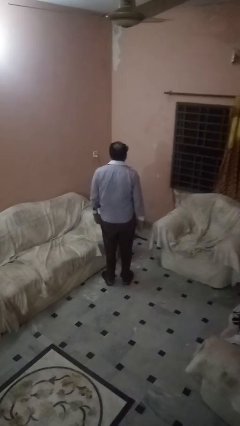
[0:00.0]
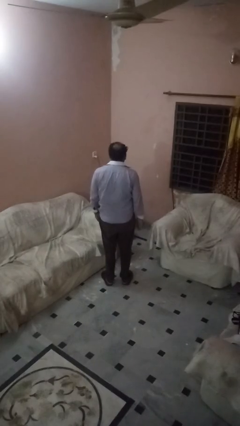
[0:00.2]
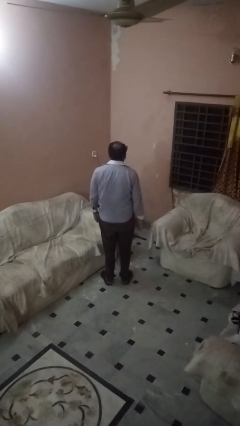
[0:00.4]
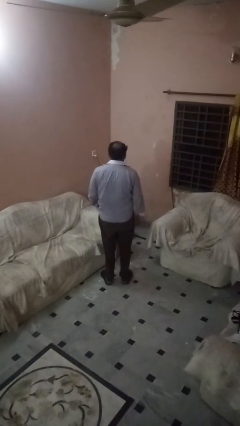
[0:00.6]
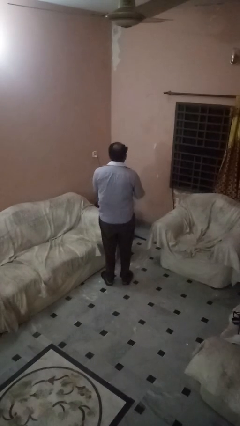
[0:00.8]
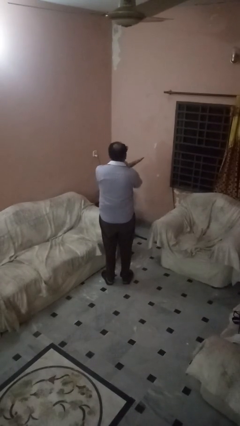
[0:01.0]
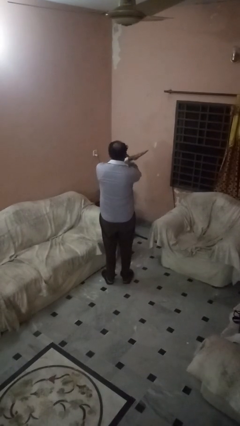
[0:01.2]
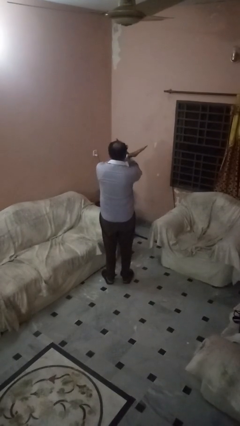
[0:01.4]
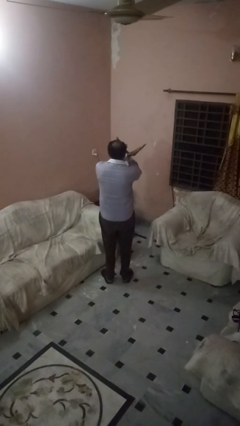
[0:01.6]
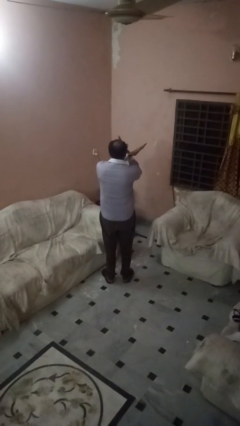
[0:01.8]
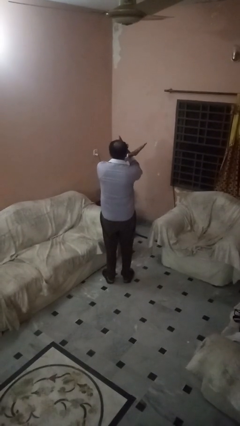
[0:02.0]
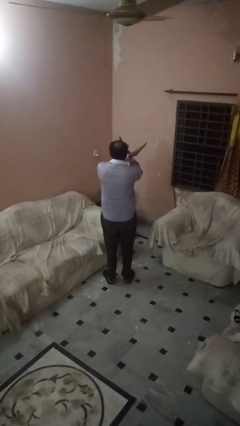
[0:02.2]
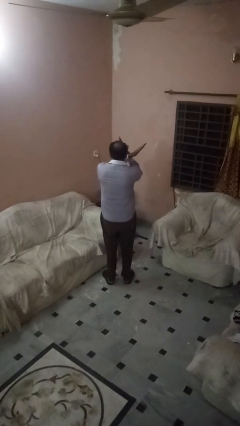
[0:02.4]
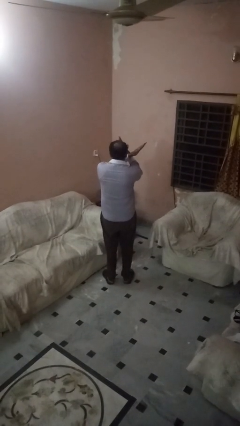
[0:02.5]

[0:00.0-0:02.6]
person gestures arms x

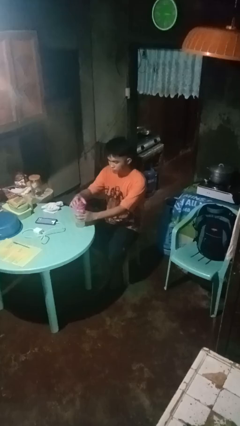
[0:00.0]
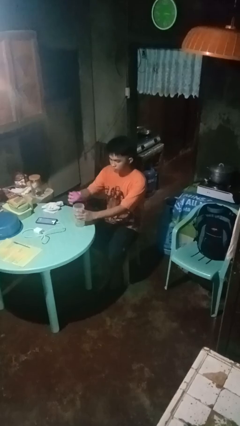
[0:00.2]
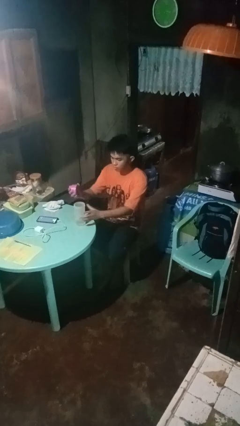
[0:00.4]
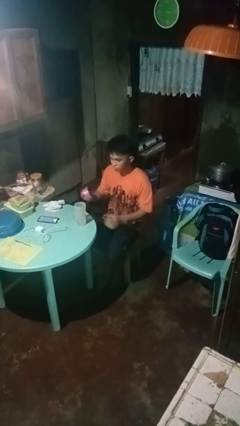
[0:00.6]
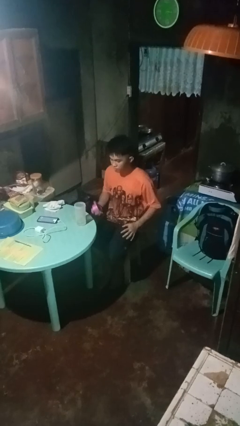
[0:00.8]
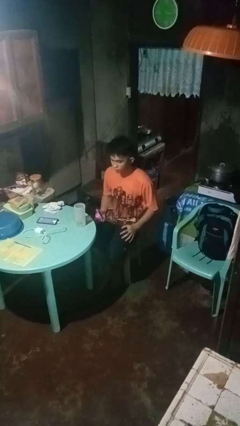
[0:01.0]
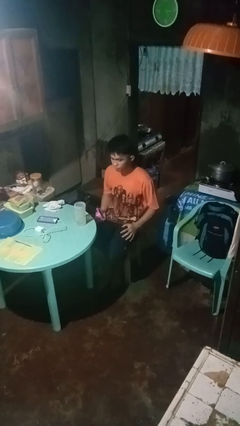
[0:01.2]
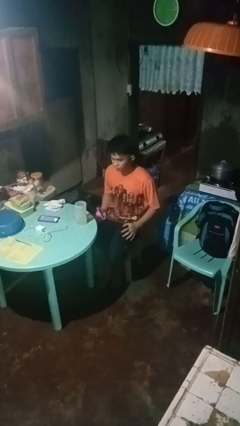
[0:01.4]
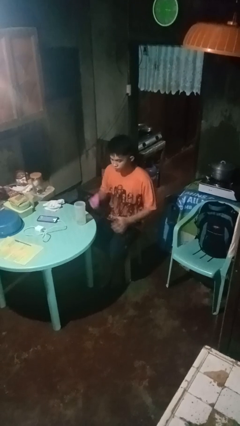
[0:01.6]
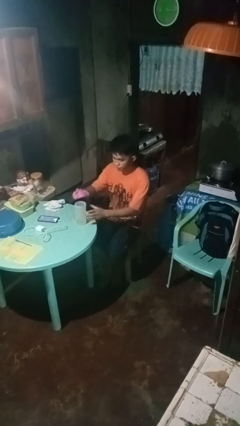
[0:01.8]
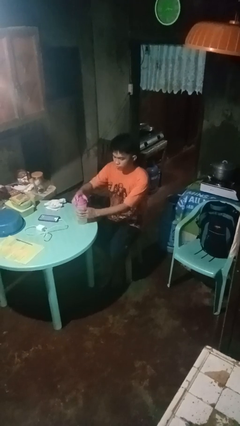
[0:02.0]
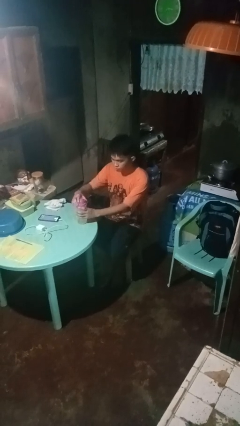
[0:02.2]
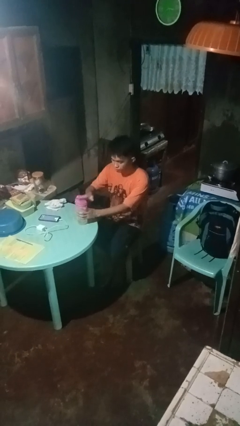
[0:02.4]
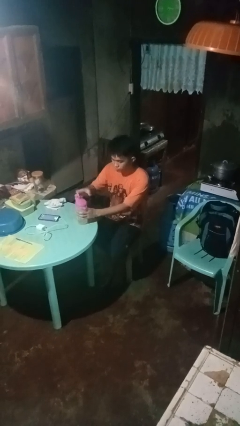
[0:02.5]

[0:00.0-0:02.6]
person unscrews lid from bottle

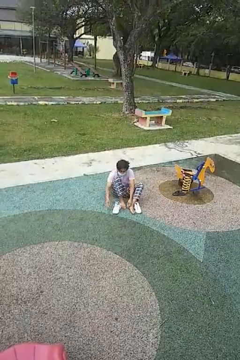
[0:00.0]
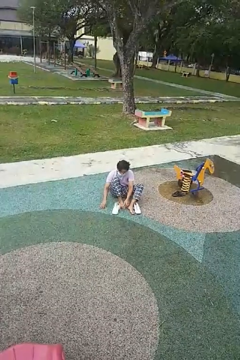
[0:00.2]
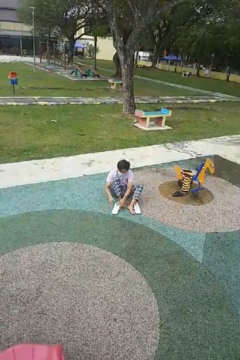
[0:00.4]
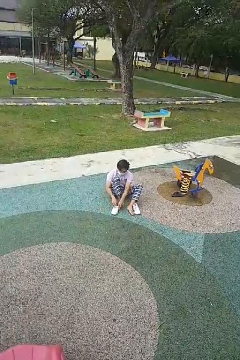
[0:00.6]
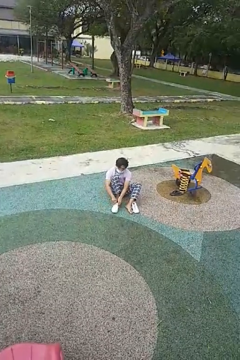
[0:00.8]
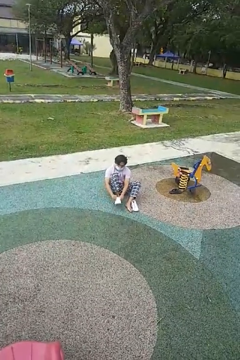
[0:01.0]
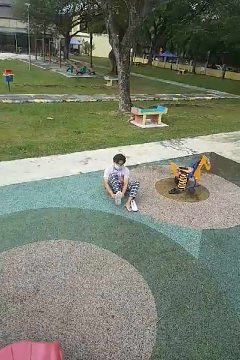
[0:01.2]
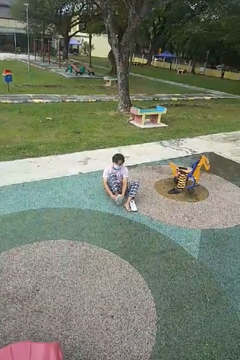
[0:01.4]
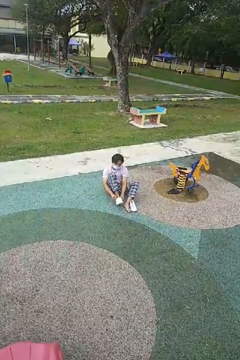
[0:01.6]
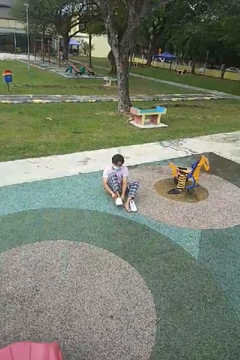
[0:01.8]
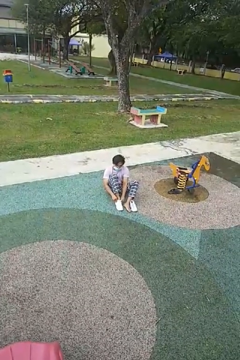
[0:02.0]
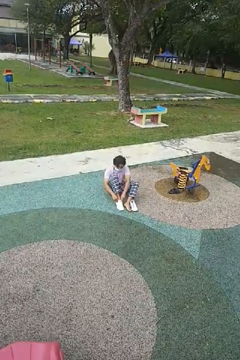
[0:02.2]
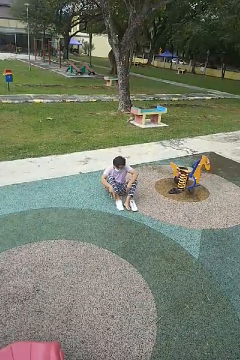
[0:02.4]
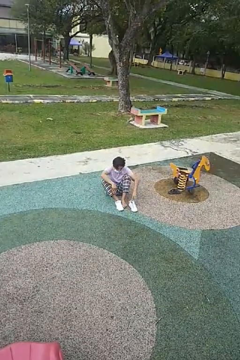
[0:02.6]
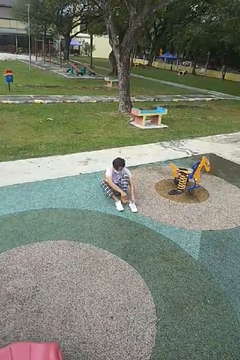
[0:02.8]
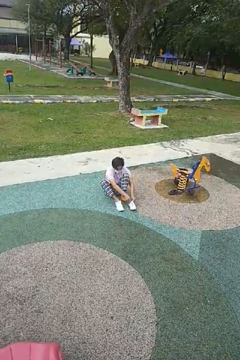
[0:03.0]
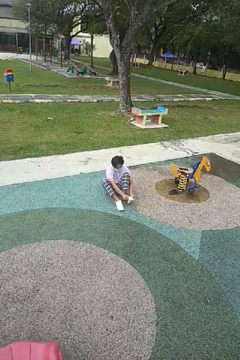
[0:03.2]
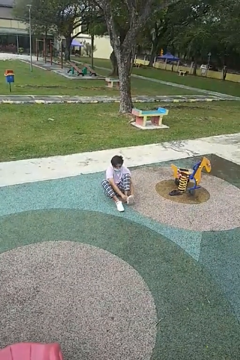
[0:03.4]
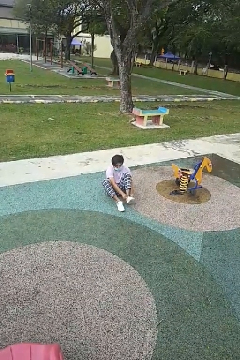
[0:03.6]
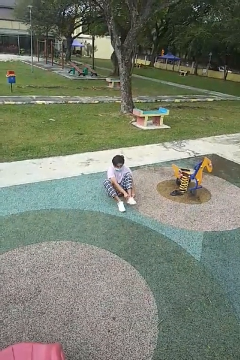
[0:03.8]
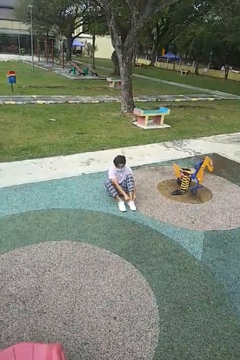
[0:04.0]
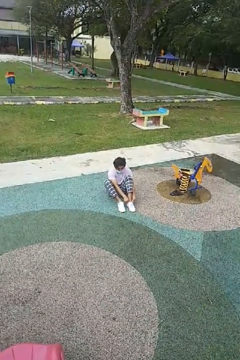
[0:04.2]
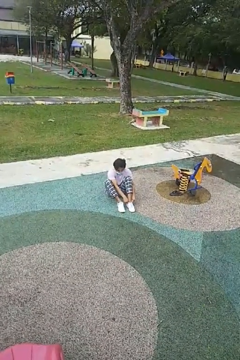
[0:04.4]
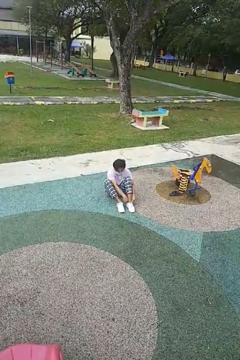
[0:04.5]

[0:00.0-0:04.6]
person puts on shoes

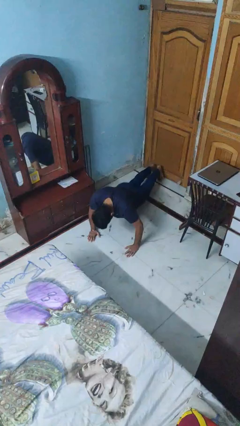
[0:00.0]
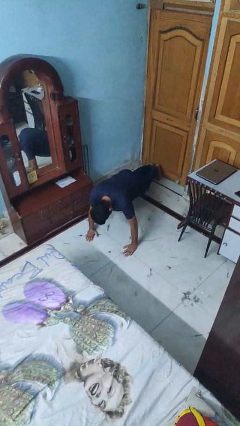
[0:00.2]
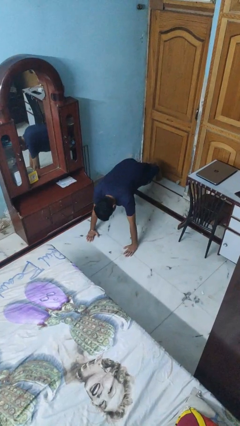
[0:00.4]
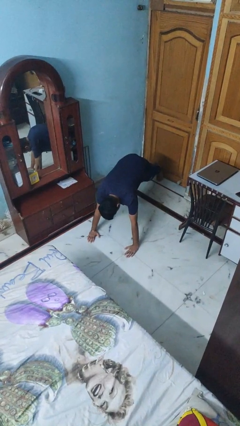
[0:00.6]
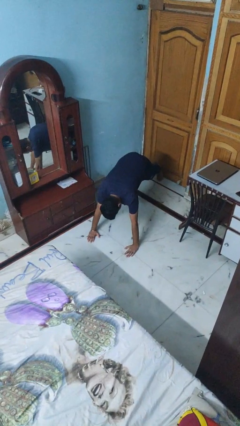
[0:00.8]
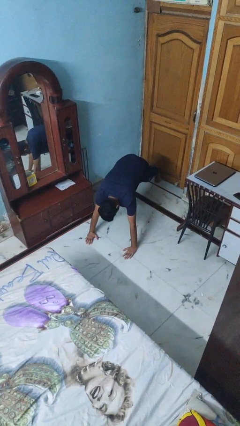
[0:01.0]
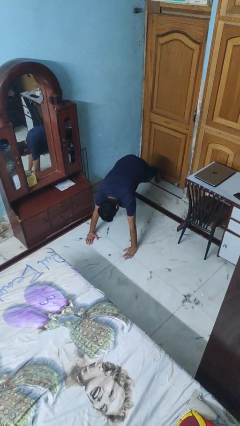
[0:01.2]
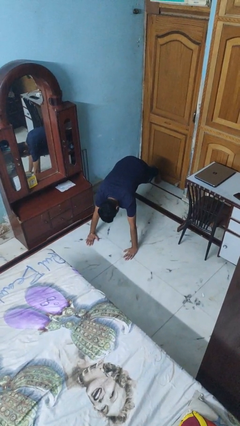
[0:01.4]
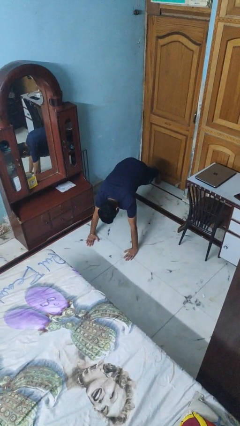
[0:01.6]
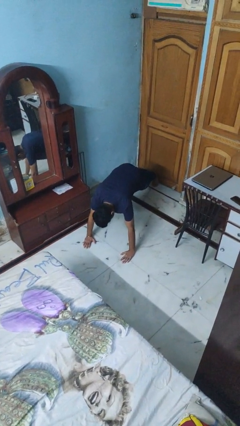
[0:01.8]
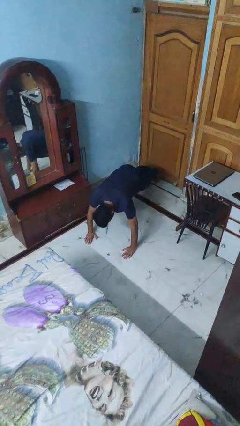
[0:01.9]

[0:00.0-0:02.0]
person exercises with pushup

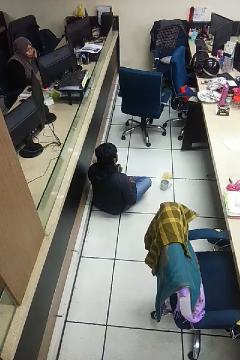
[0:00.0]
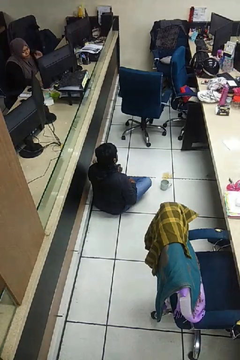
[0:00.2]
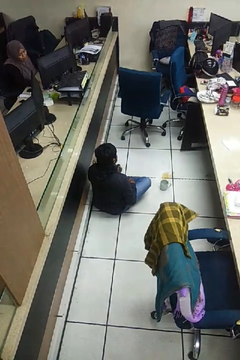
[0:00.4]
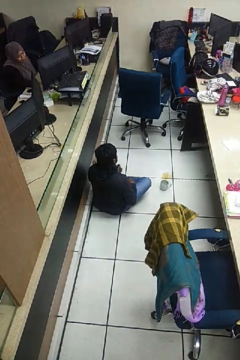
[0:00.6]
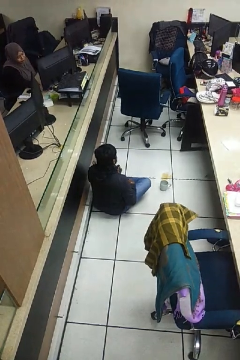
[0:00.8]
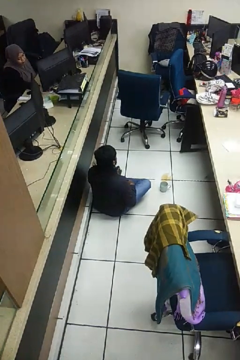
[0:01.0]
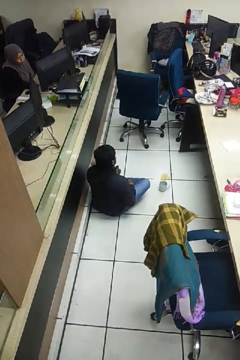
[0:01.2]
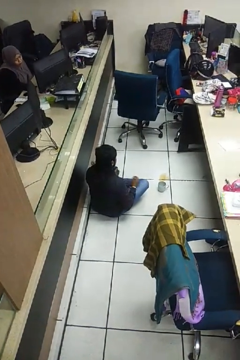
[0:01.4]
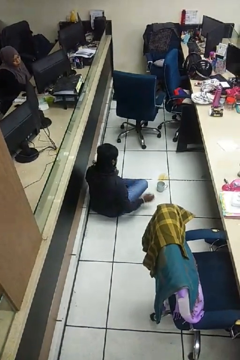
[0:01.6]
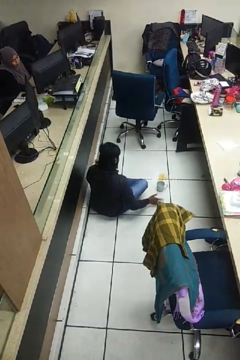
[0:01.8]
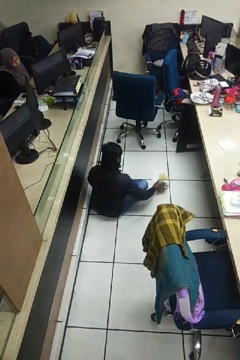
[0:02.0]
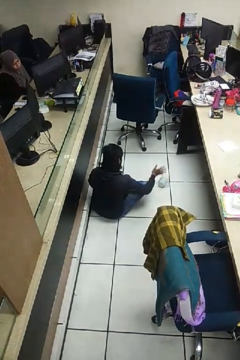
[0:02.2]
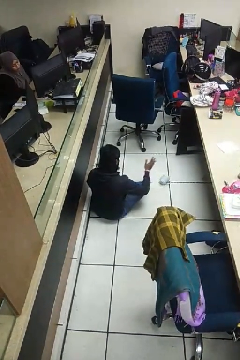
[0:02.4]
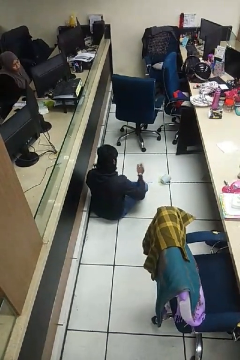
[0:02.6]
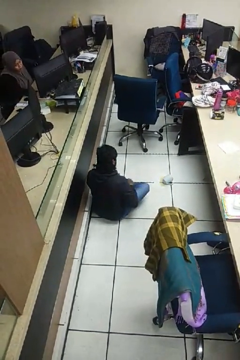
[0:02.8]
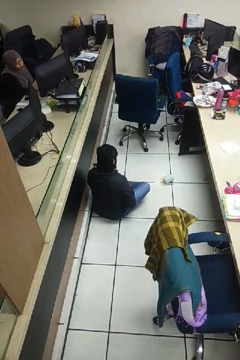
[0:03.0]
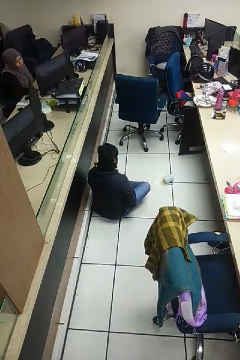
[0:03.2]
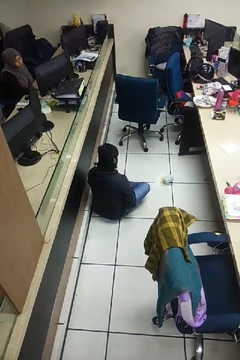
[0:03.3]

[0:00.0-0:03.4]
person spills on floor

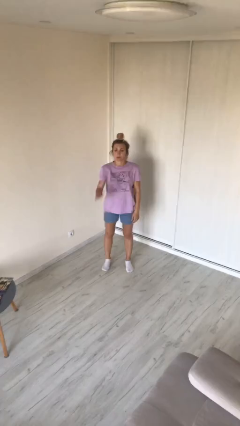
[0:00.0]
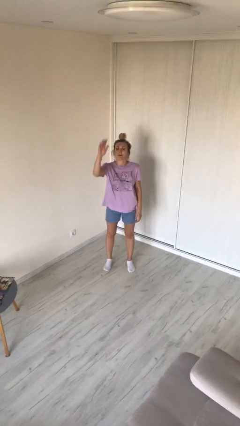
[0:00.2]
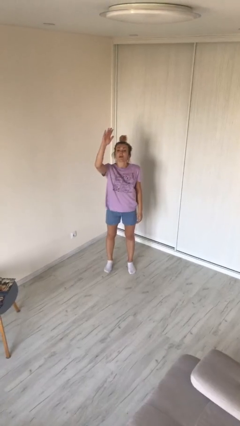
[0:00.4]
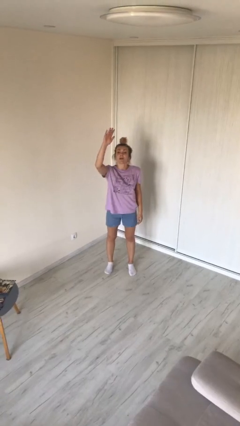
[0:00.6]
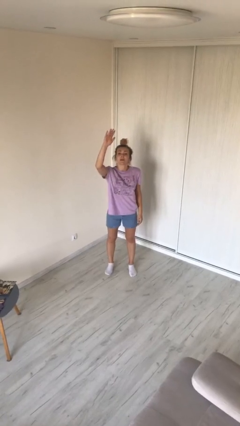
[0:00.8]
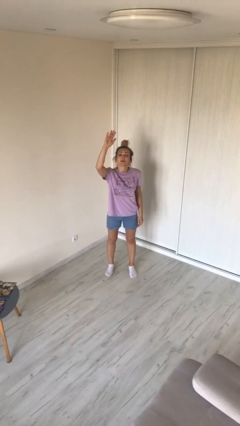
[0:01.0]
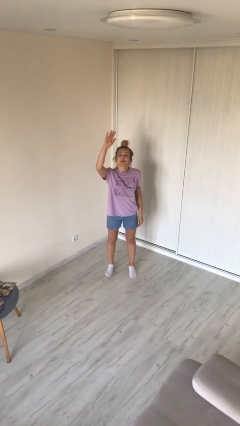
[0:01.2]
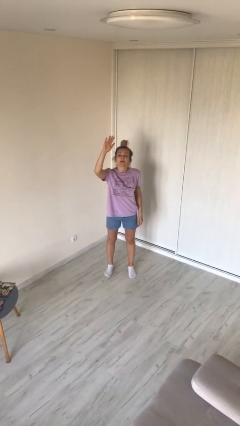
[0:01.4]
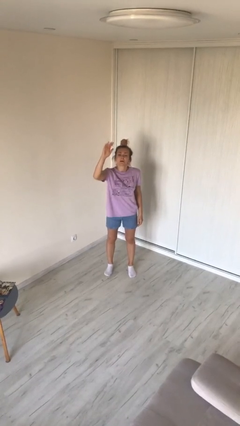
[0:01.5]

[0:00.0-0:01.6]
person gestures raise hand

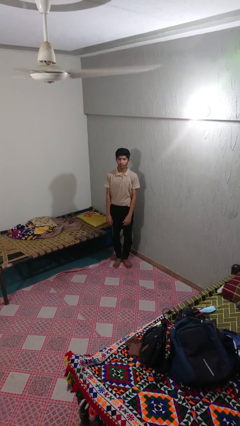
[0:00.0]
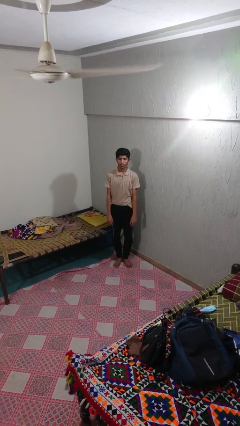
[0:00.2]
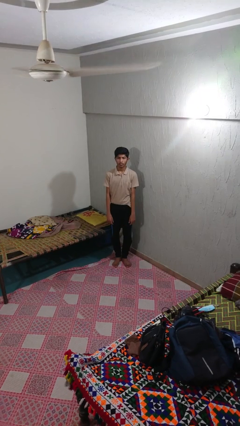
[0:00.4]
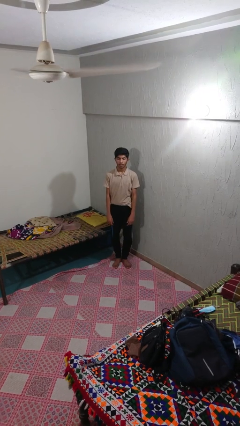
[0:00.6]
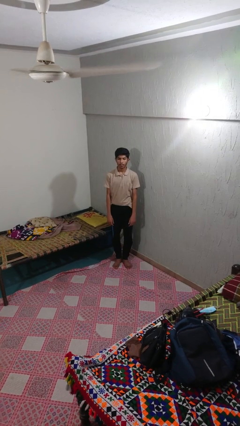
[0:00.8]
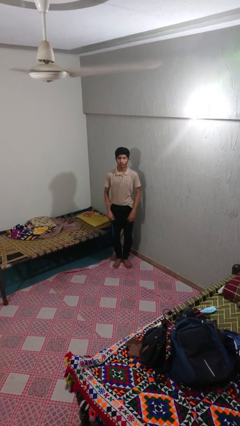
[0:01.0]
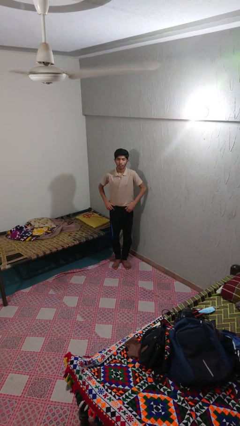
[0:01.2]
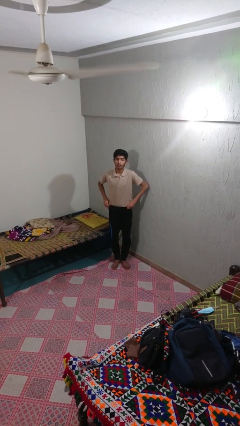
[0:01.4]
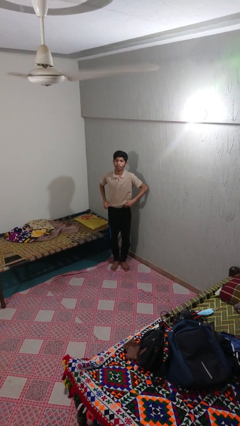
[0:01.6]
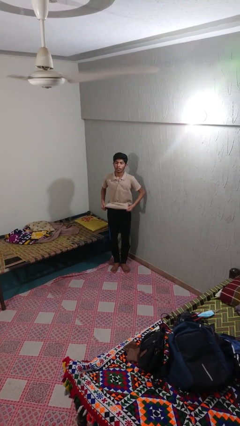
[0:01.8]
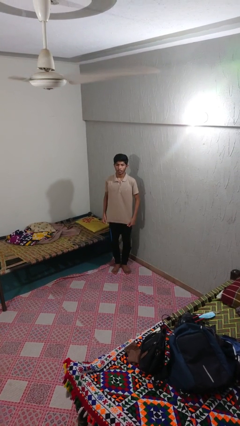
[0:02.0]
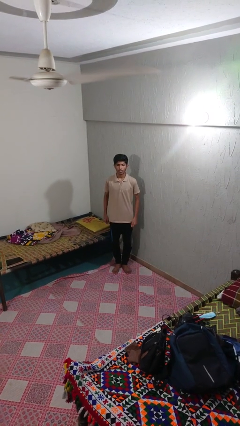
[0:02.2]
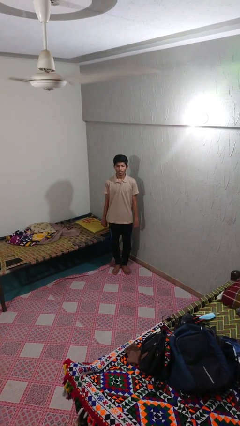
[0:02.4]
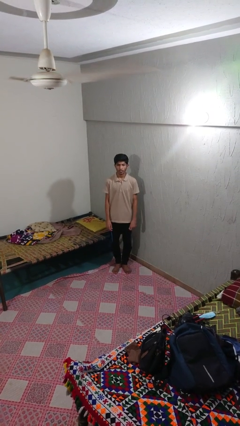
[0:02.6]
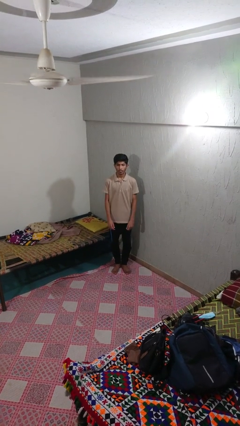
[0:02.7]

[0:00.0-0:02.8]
person untucks shirt
